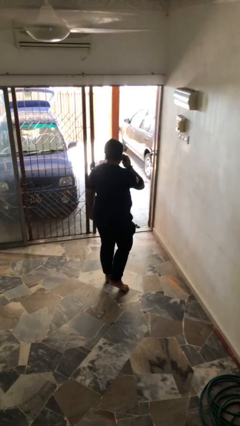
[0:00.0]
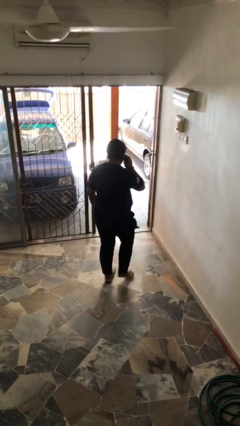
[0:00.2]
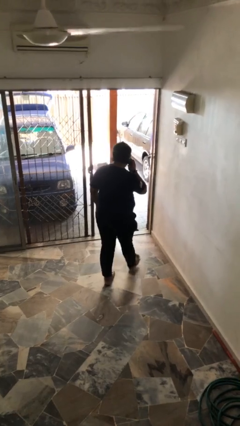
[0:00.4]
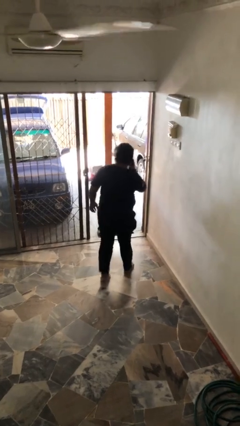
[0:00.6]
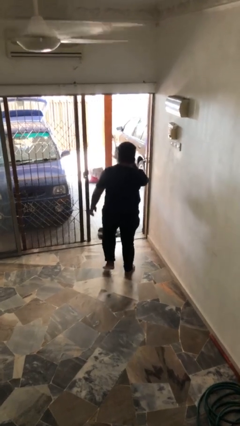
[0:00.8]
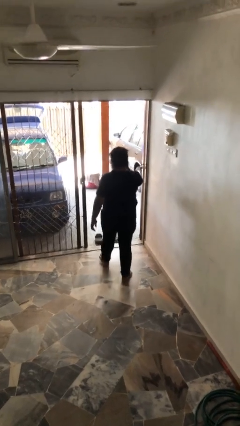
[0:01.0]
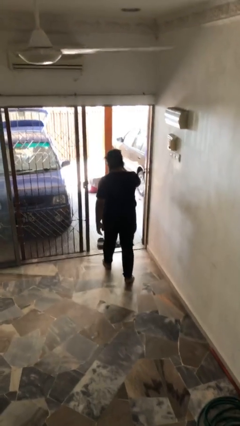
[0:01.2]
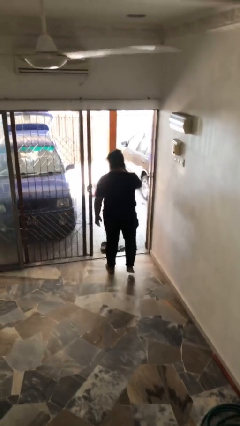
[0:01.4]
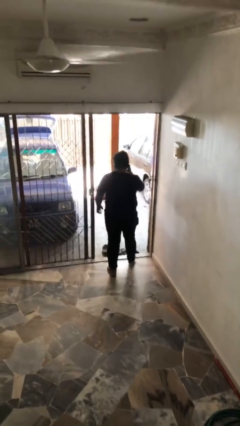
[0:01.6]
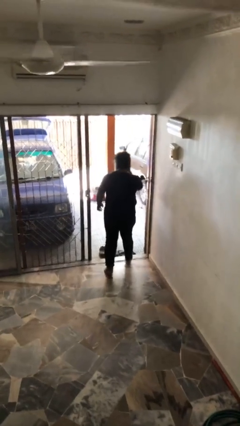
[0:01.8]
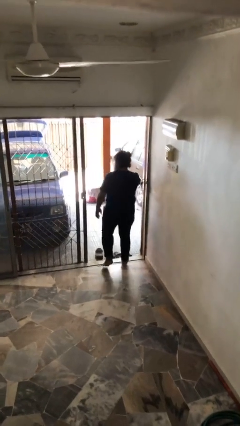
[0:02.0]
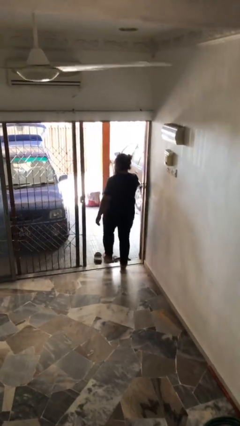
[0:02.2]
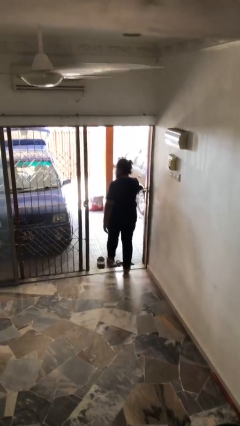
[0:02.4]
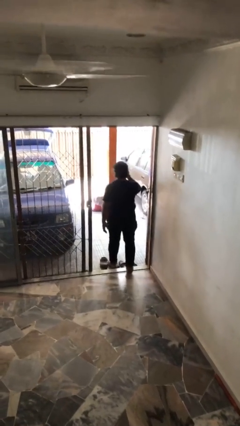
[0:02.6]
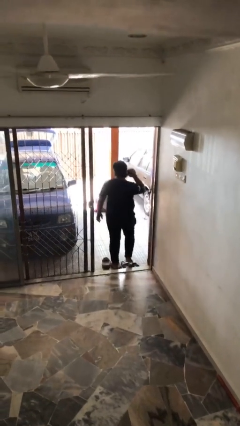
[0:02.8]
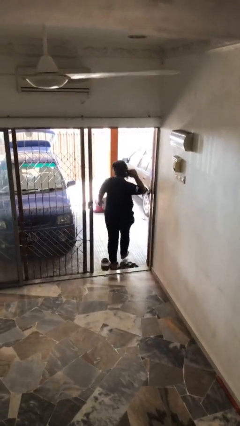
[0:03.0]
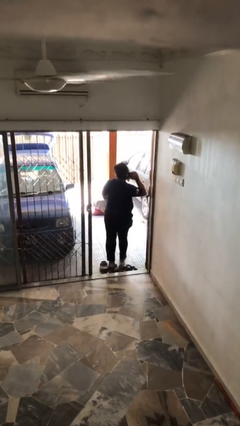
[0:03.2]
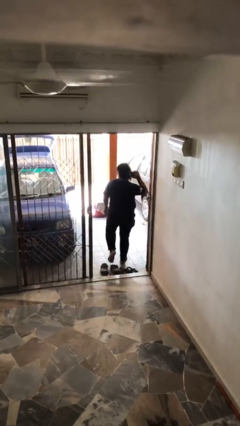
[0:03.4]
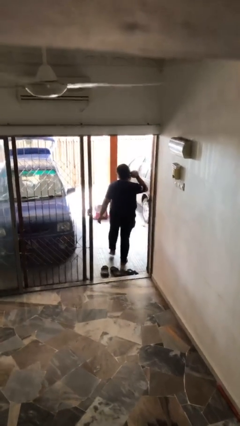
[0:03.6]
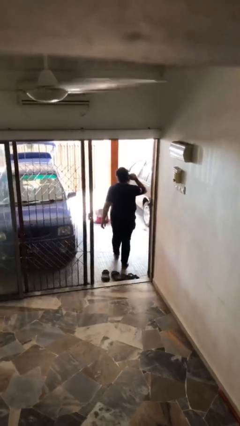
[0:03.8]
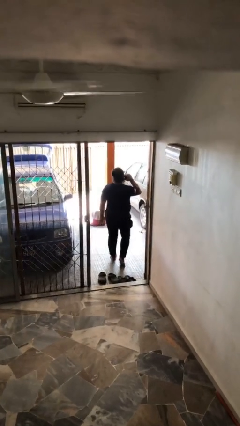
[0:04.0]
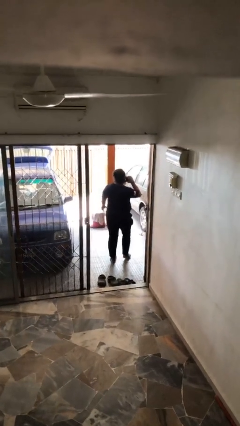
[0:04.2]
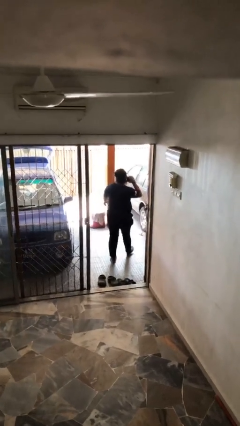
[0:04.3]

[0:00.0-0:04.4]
person exits scene through structure

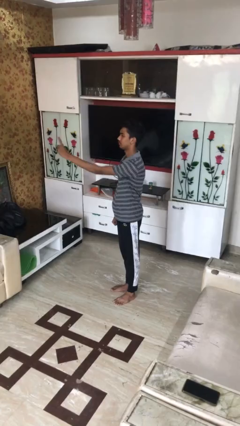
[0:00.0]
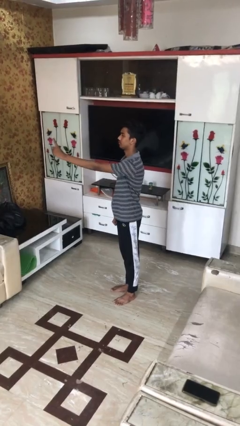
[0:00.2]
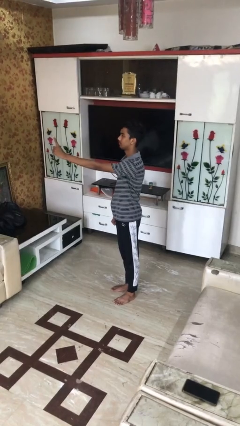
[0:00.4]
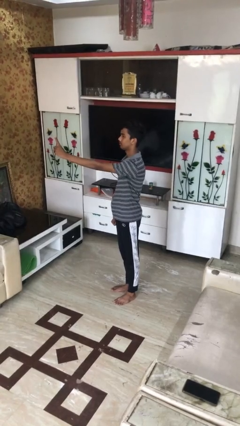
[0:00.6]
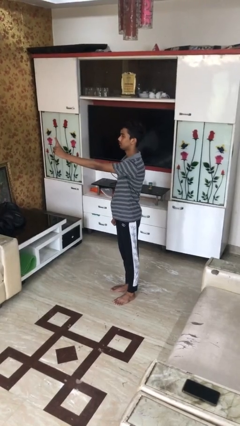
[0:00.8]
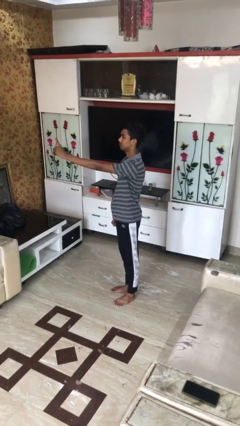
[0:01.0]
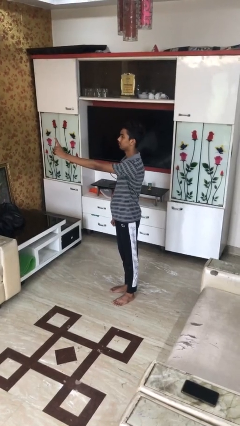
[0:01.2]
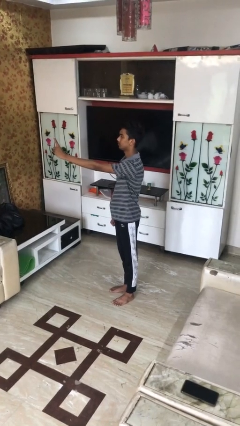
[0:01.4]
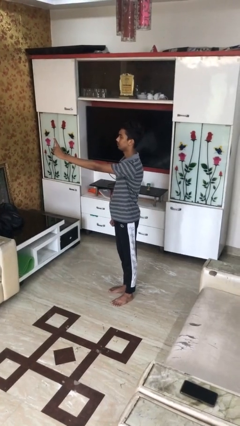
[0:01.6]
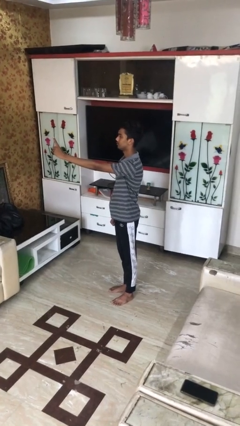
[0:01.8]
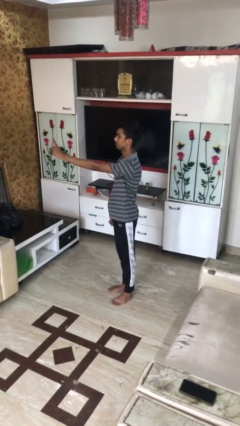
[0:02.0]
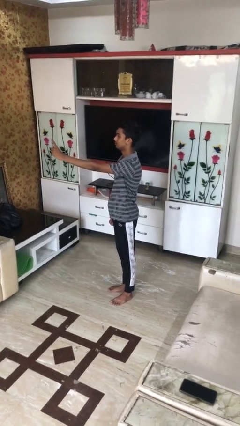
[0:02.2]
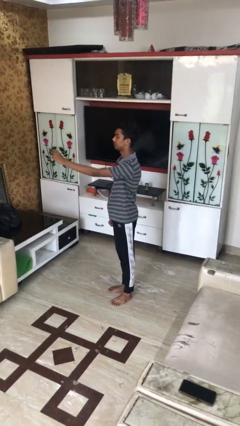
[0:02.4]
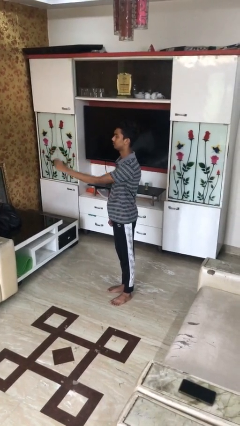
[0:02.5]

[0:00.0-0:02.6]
person gestures number one

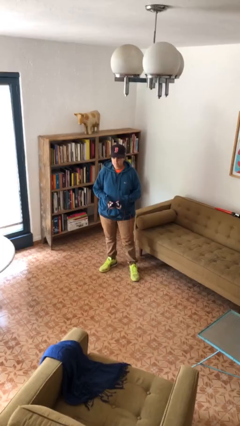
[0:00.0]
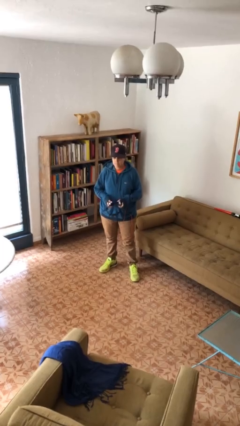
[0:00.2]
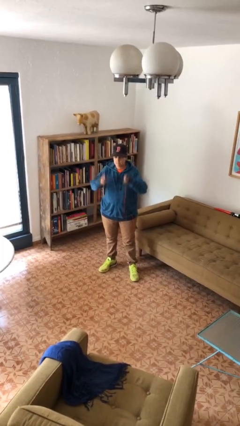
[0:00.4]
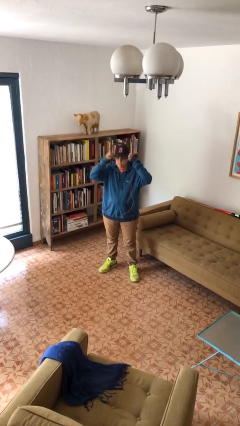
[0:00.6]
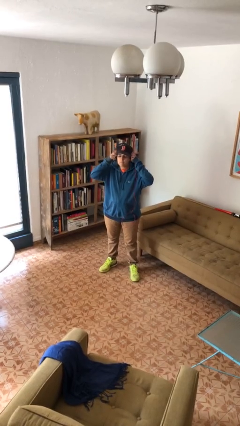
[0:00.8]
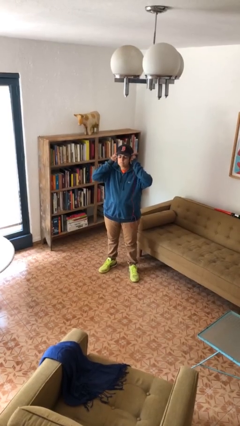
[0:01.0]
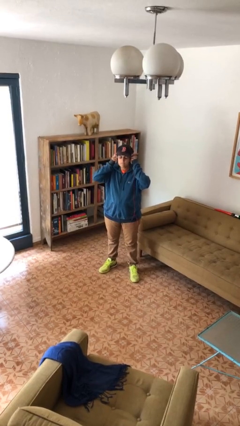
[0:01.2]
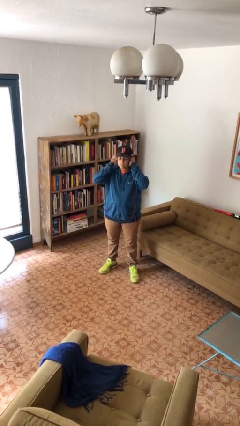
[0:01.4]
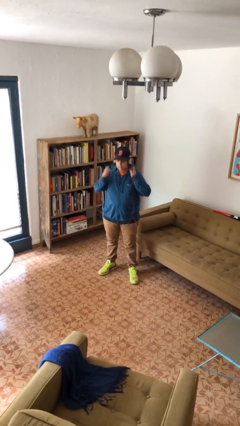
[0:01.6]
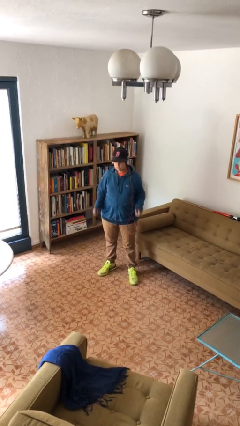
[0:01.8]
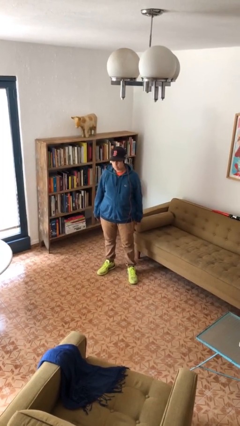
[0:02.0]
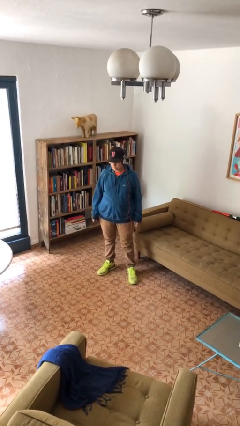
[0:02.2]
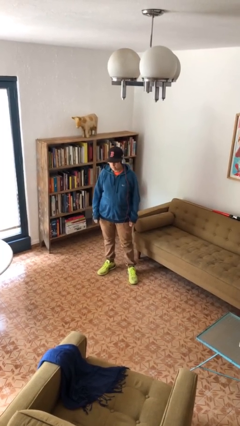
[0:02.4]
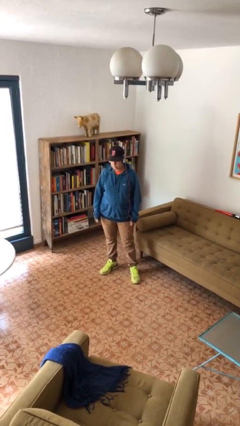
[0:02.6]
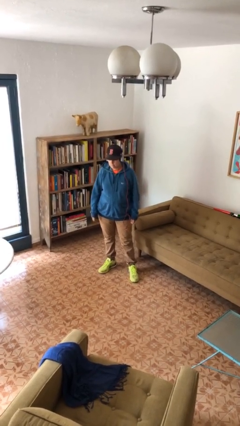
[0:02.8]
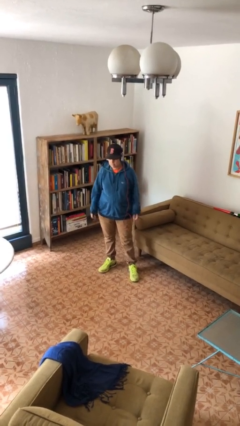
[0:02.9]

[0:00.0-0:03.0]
person puts on headphones

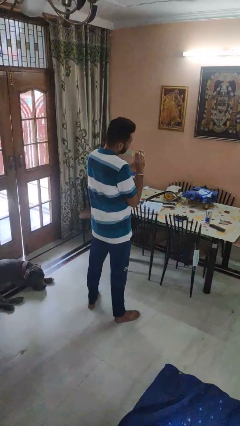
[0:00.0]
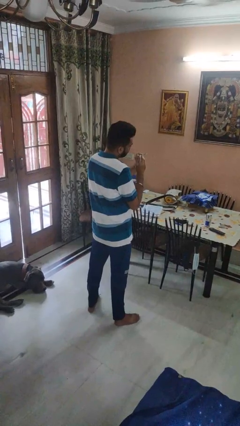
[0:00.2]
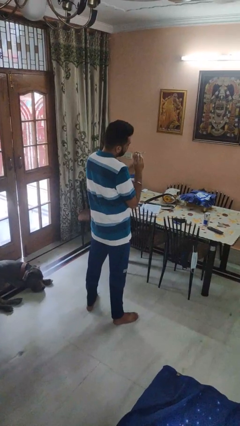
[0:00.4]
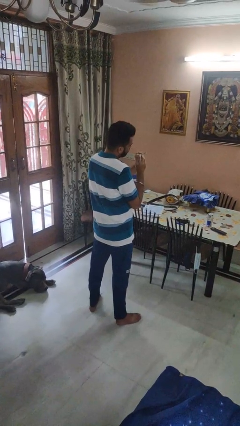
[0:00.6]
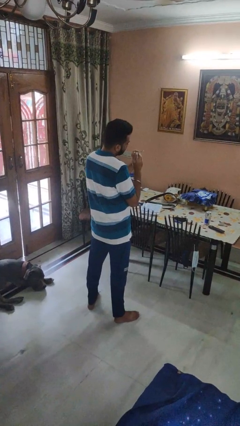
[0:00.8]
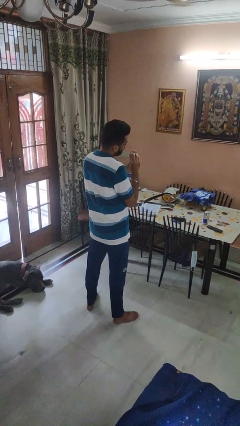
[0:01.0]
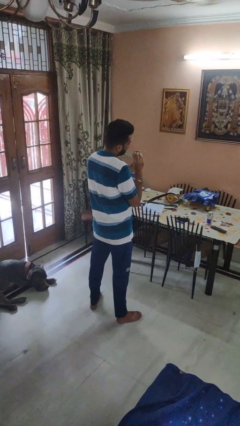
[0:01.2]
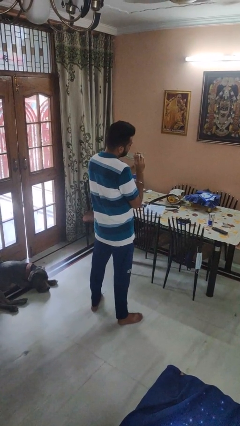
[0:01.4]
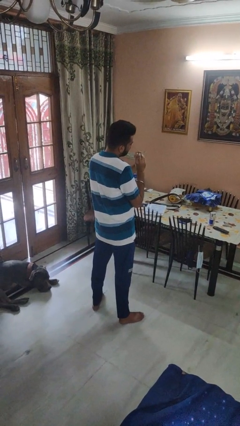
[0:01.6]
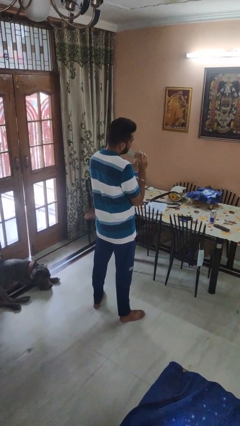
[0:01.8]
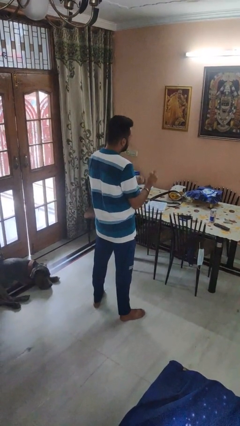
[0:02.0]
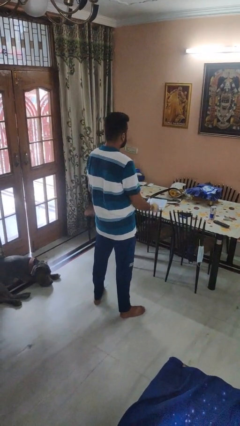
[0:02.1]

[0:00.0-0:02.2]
person files fingernails

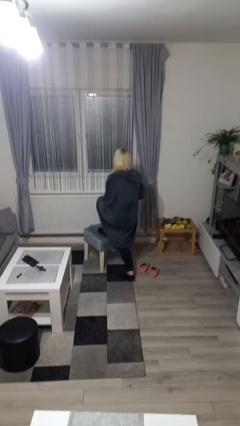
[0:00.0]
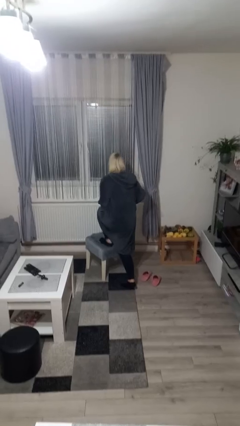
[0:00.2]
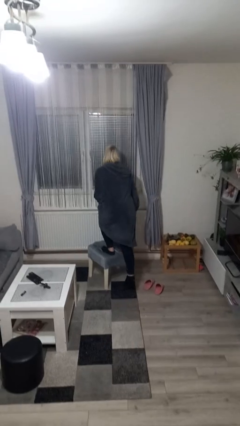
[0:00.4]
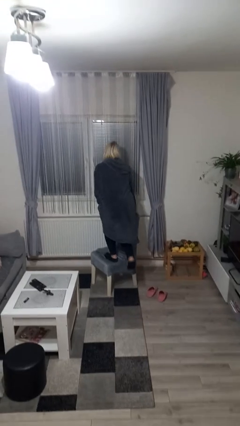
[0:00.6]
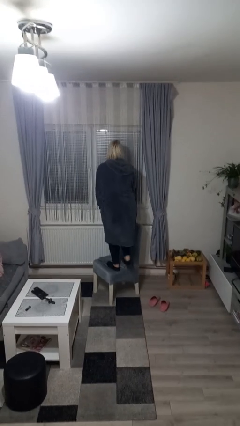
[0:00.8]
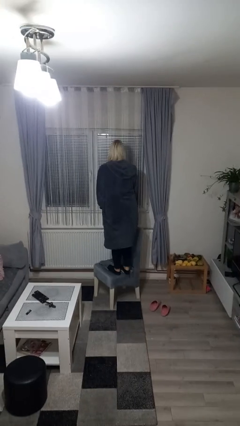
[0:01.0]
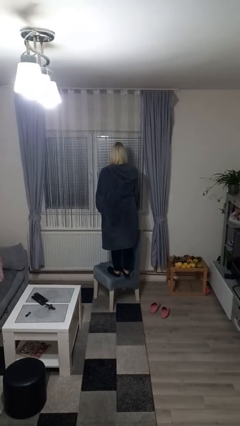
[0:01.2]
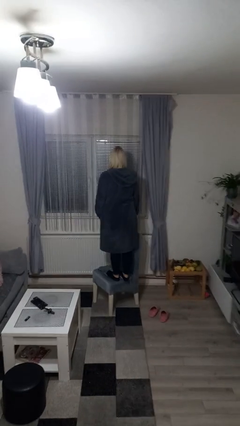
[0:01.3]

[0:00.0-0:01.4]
person climbs on chair

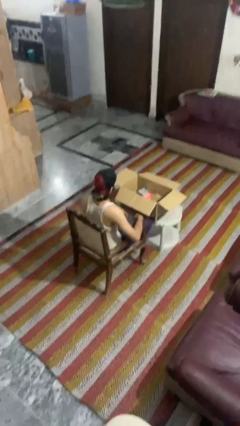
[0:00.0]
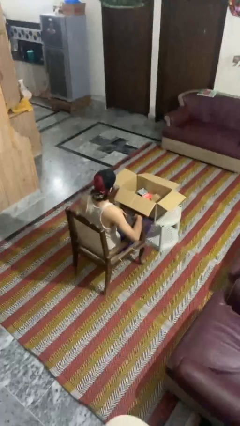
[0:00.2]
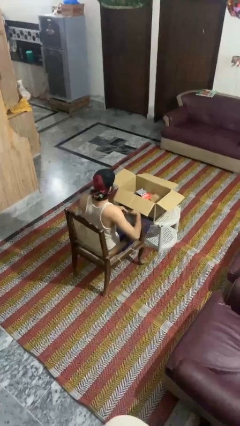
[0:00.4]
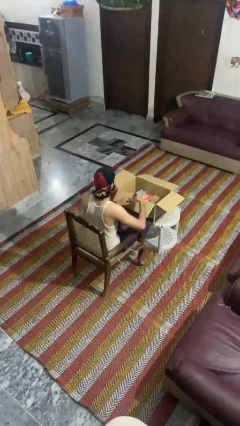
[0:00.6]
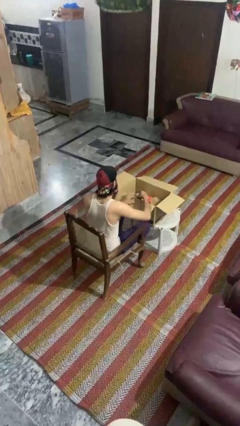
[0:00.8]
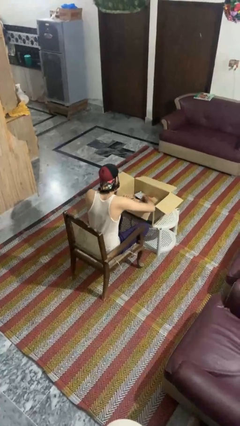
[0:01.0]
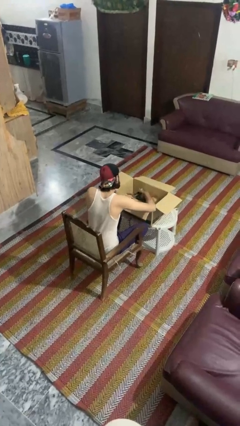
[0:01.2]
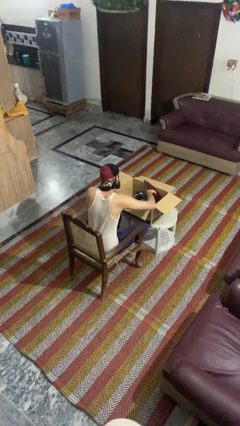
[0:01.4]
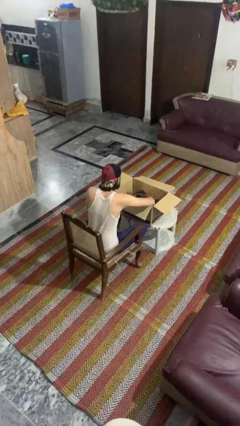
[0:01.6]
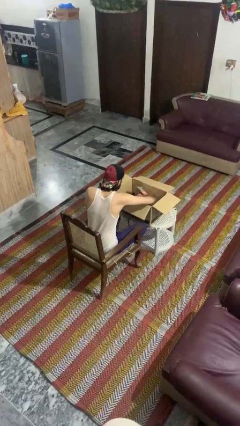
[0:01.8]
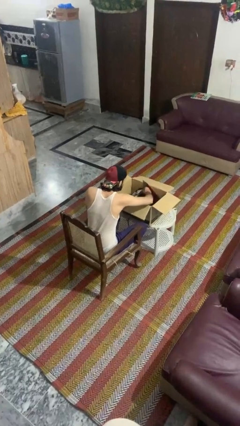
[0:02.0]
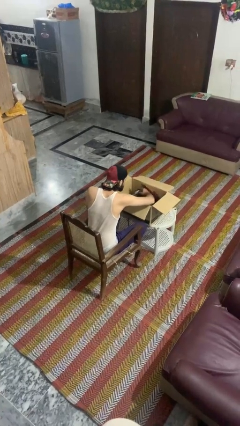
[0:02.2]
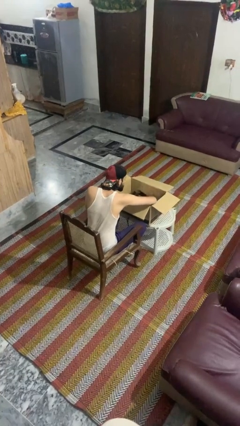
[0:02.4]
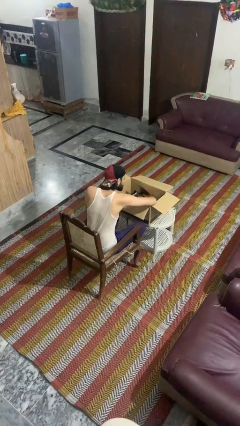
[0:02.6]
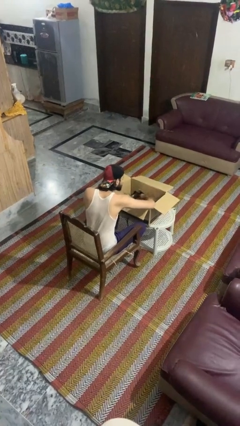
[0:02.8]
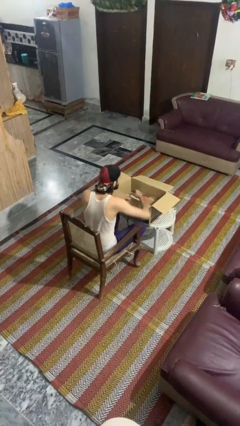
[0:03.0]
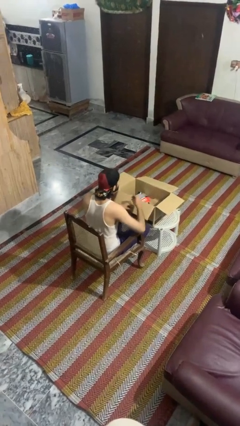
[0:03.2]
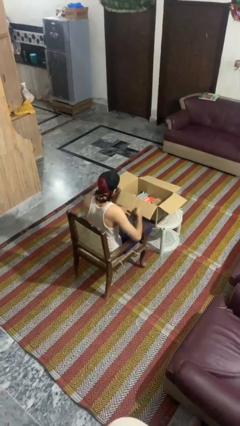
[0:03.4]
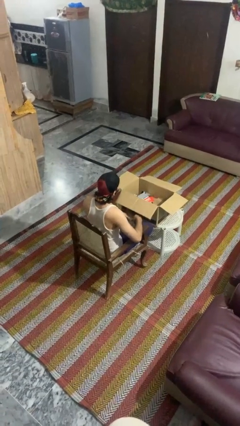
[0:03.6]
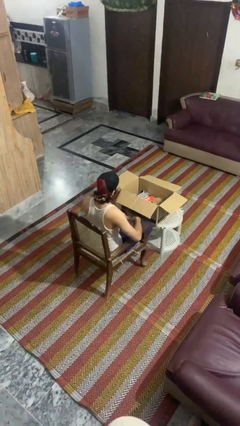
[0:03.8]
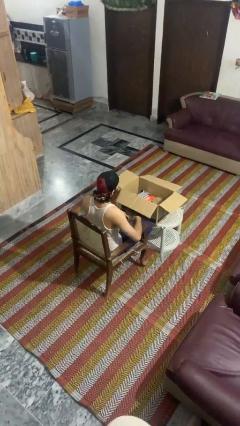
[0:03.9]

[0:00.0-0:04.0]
person searches in box
